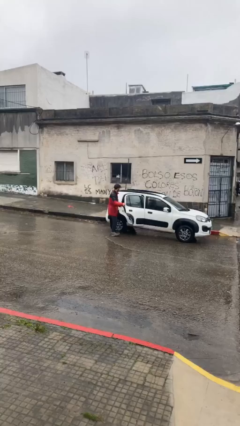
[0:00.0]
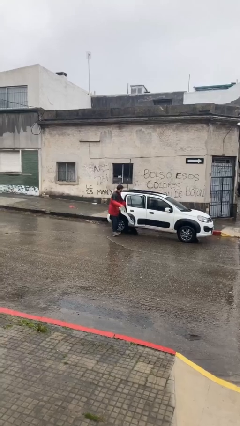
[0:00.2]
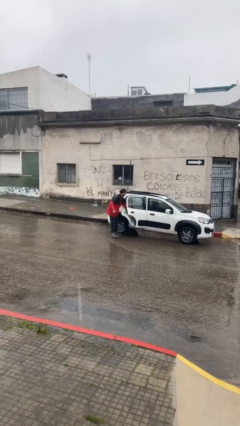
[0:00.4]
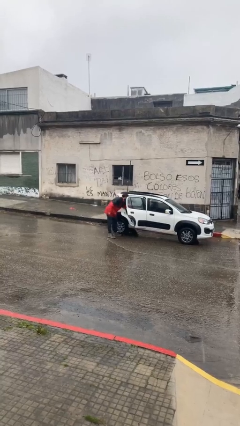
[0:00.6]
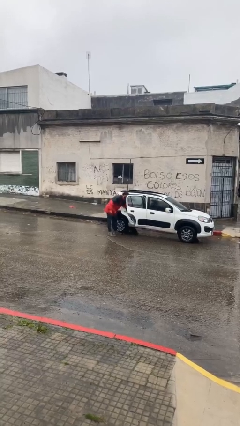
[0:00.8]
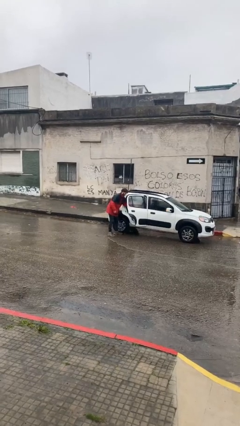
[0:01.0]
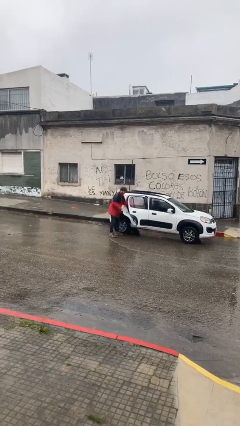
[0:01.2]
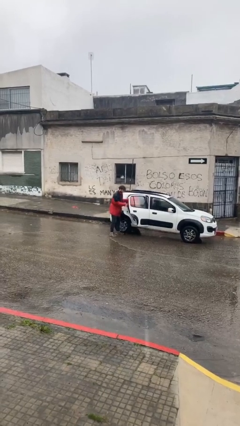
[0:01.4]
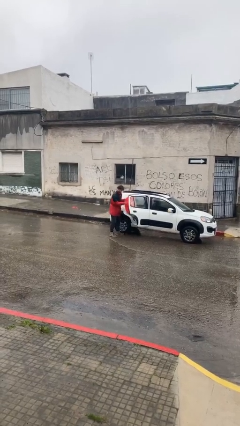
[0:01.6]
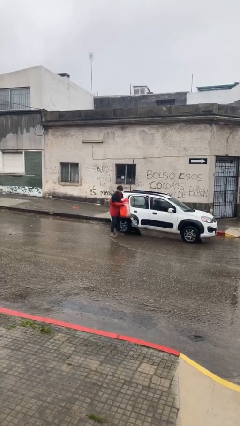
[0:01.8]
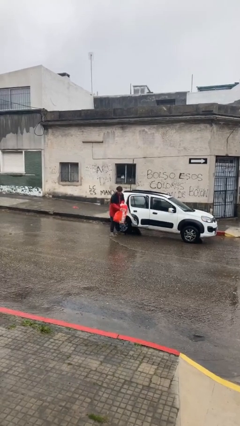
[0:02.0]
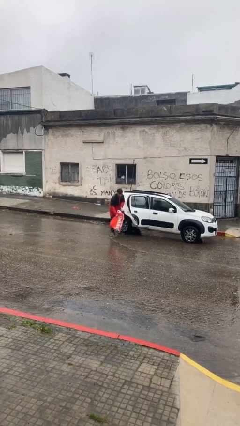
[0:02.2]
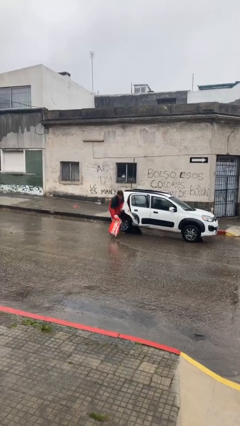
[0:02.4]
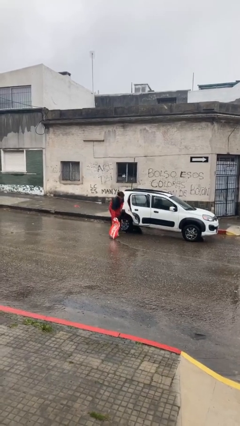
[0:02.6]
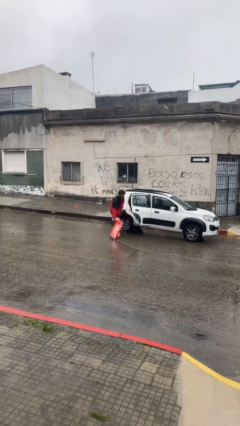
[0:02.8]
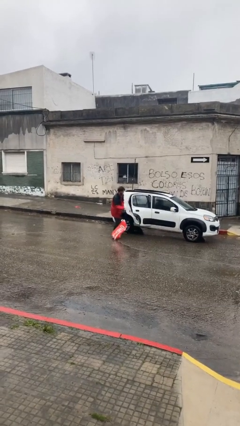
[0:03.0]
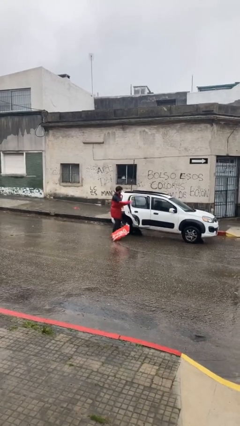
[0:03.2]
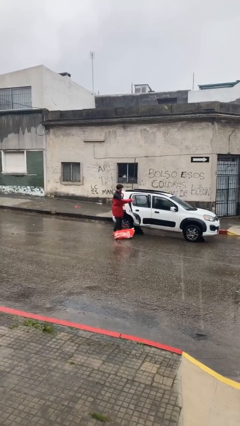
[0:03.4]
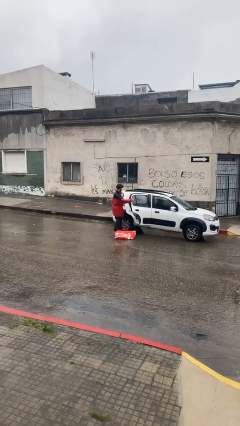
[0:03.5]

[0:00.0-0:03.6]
person unloads car

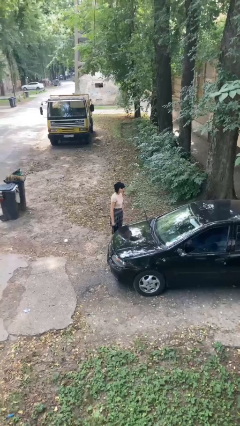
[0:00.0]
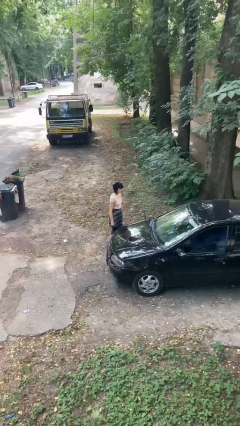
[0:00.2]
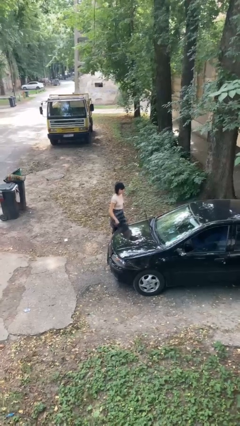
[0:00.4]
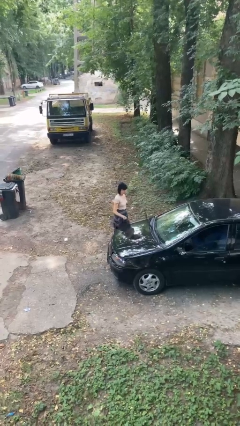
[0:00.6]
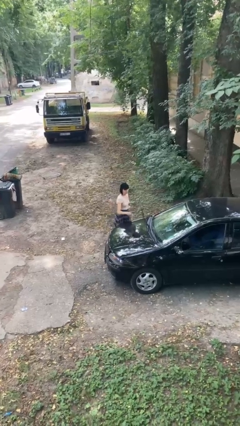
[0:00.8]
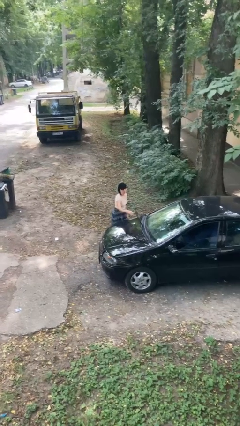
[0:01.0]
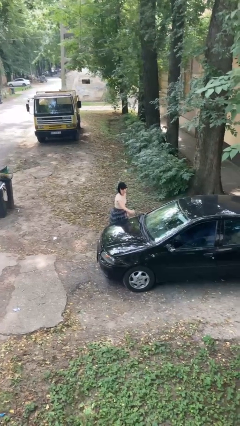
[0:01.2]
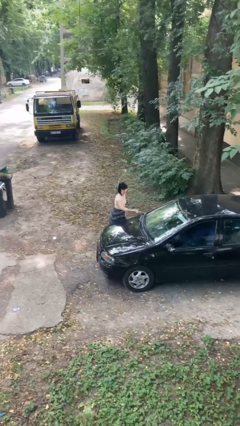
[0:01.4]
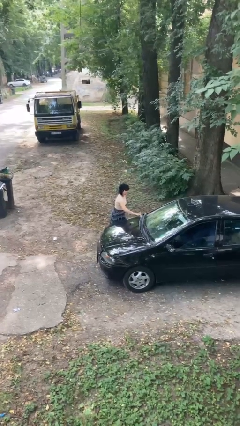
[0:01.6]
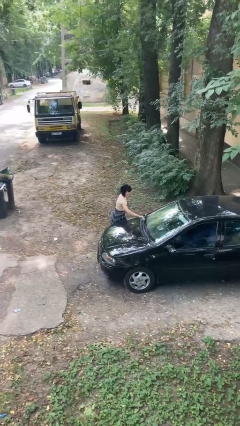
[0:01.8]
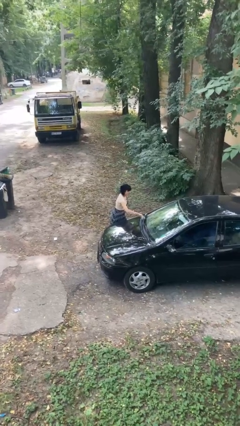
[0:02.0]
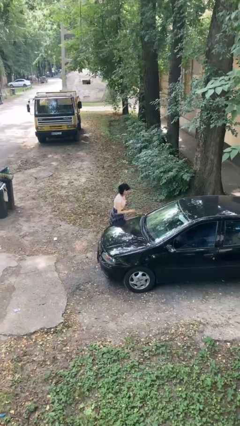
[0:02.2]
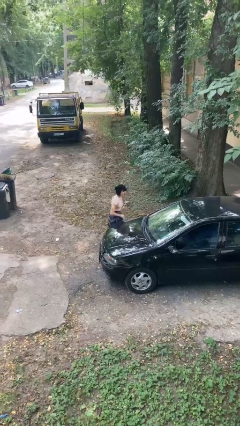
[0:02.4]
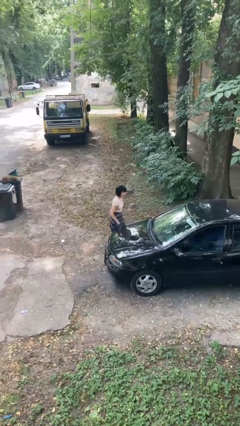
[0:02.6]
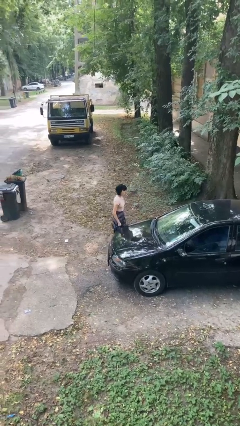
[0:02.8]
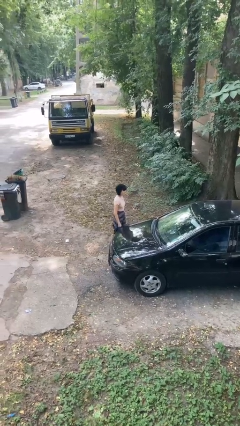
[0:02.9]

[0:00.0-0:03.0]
person flips down car wipers

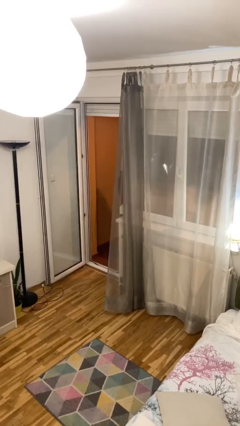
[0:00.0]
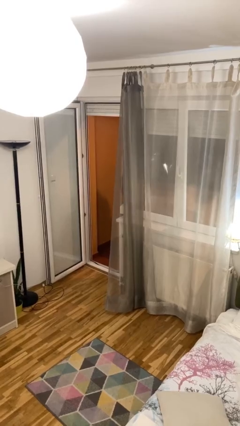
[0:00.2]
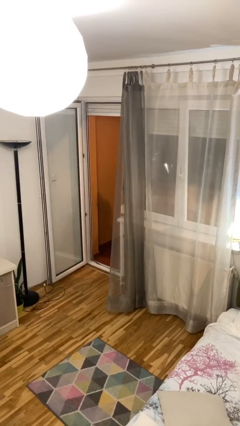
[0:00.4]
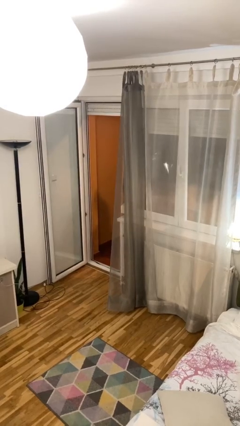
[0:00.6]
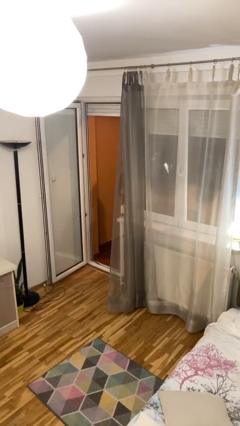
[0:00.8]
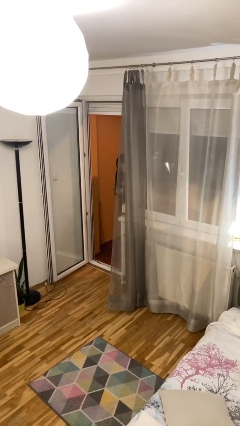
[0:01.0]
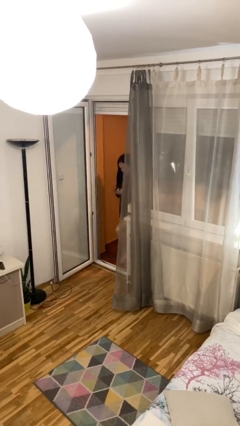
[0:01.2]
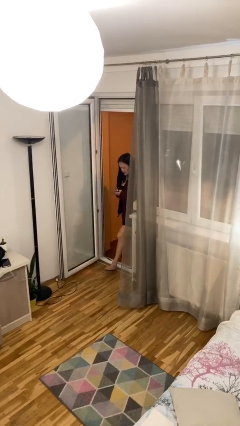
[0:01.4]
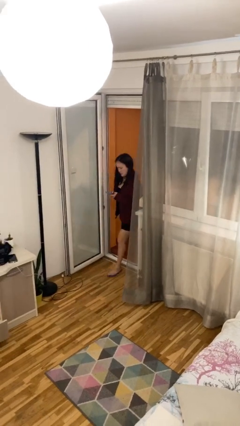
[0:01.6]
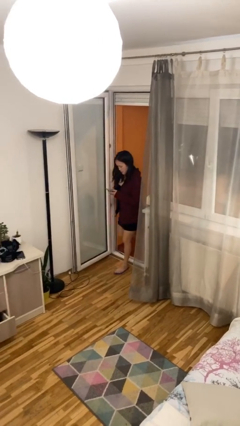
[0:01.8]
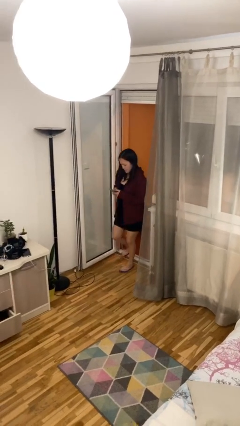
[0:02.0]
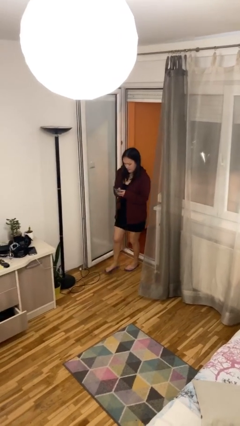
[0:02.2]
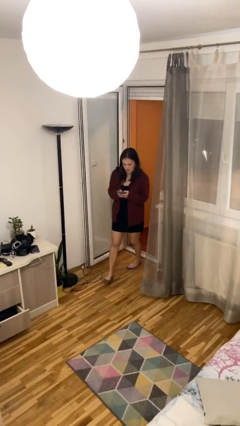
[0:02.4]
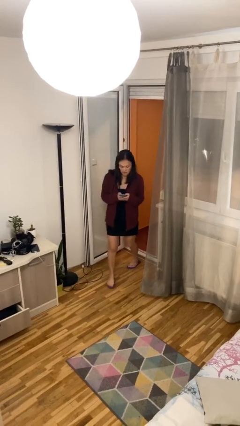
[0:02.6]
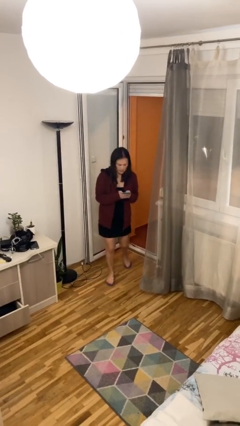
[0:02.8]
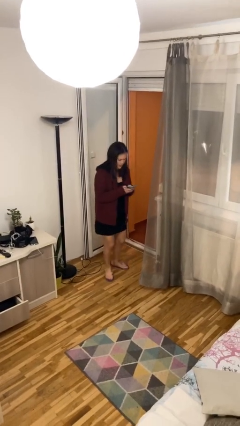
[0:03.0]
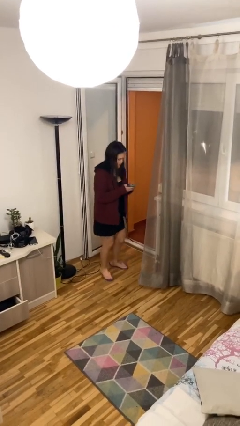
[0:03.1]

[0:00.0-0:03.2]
person enters scene through structure

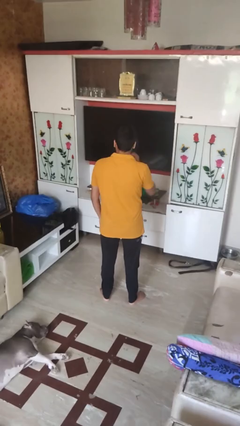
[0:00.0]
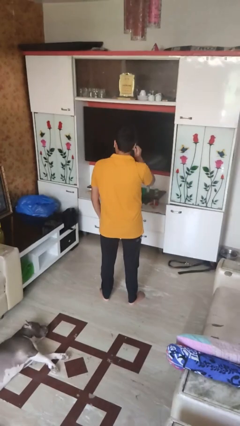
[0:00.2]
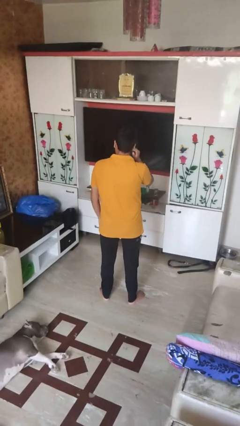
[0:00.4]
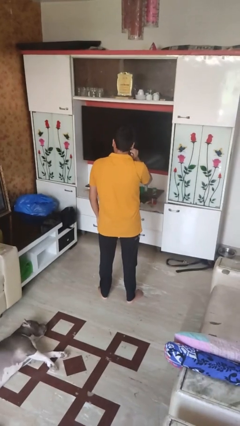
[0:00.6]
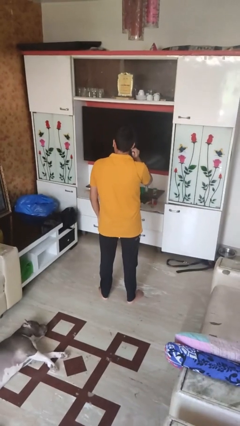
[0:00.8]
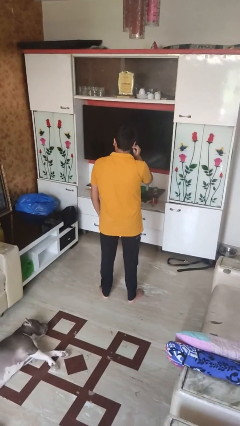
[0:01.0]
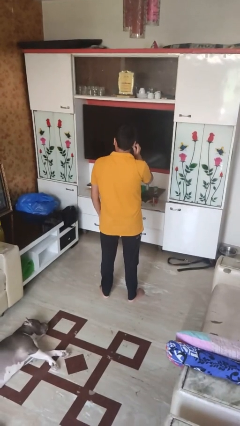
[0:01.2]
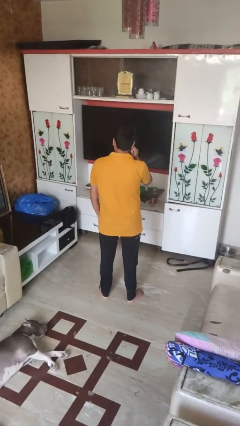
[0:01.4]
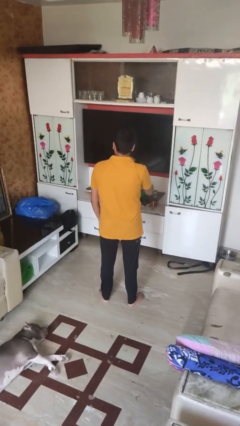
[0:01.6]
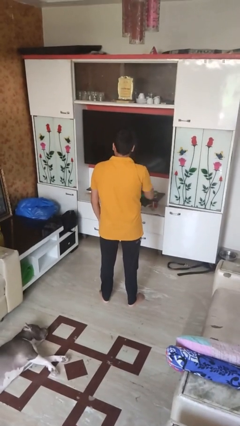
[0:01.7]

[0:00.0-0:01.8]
person touches earlobe

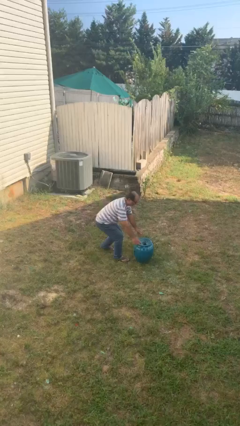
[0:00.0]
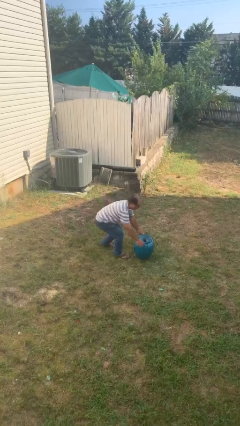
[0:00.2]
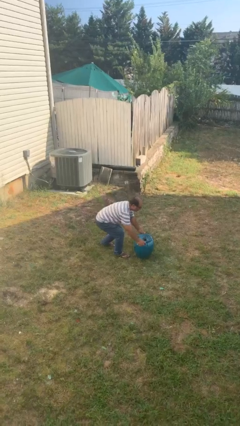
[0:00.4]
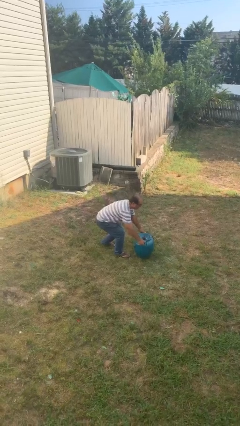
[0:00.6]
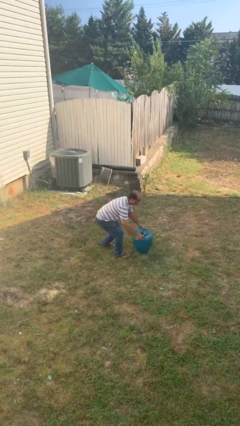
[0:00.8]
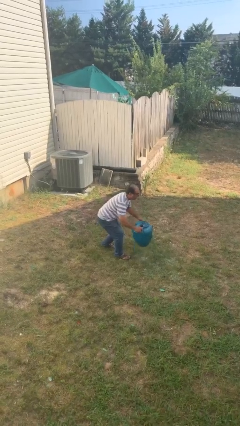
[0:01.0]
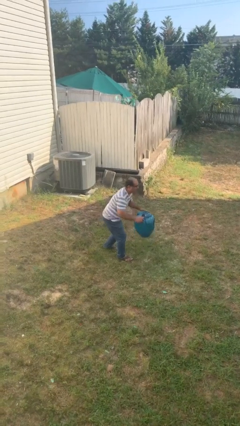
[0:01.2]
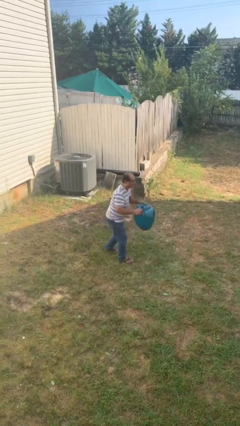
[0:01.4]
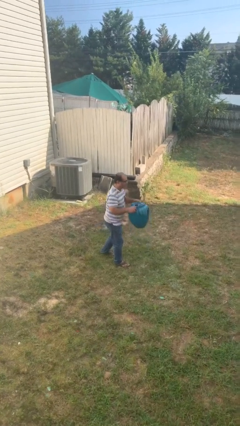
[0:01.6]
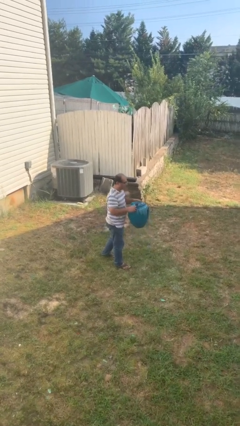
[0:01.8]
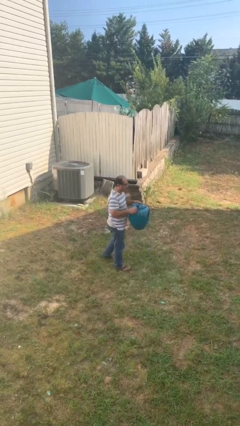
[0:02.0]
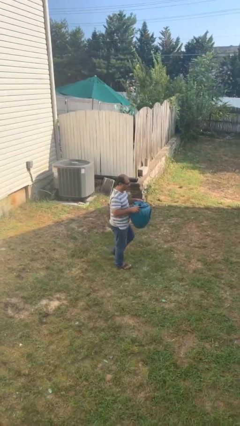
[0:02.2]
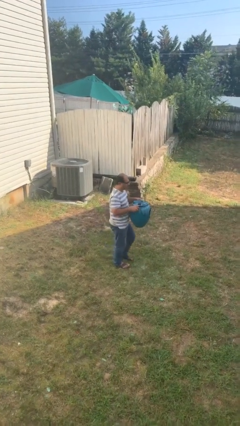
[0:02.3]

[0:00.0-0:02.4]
person picks up object from floor

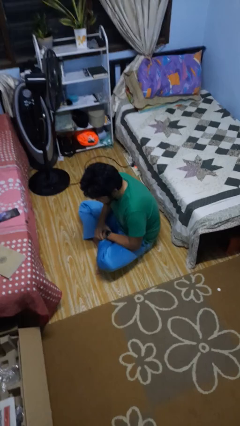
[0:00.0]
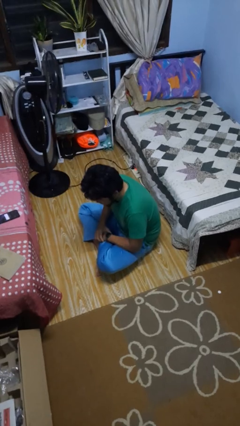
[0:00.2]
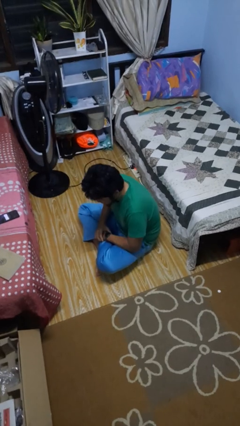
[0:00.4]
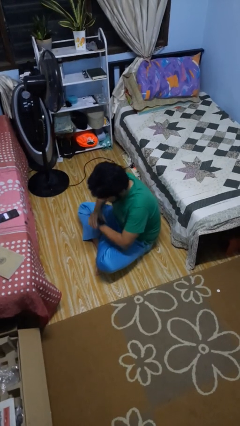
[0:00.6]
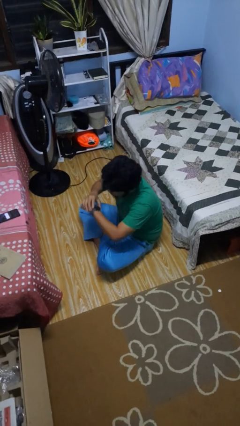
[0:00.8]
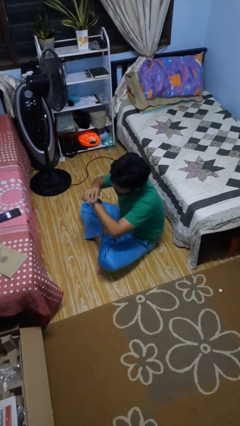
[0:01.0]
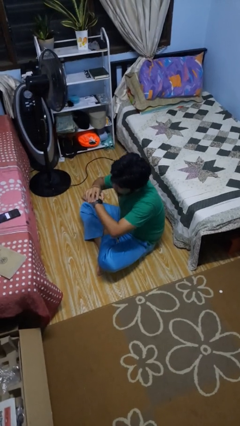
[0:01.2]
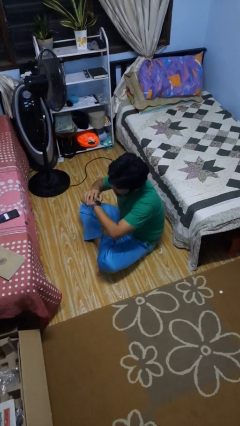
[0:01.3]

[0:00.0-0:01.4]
person looks at wristwatch

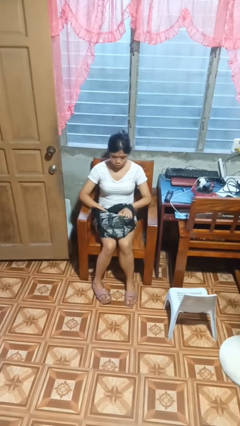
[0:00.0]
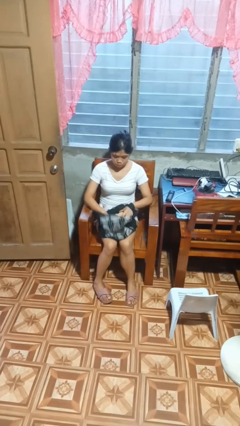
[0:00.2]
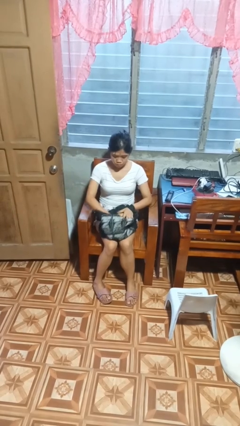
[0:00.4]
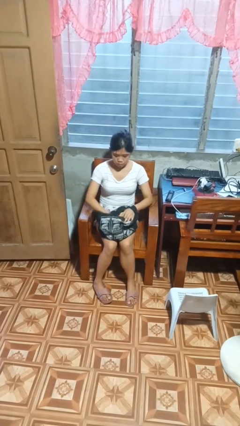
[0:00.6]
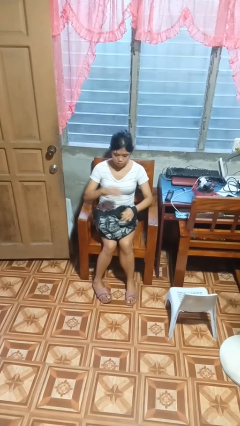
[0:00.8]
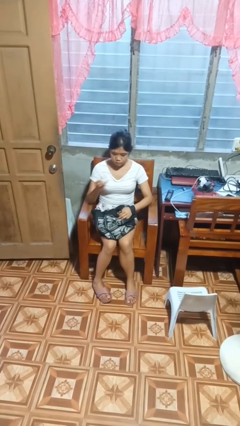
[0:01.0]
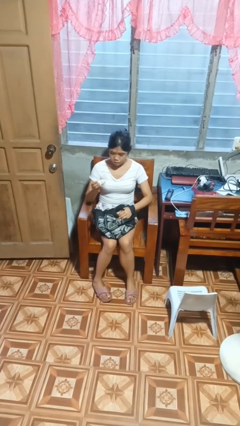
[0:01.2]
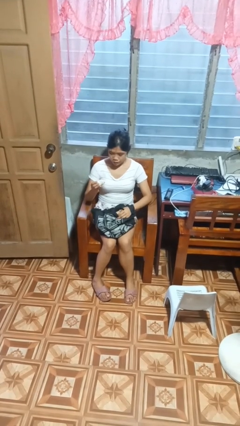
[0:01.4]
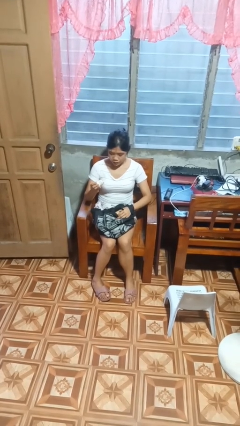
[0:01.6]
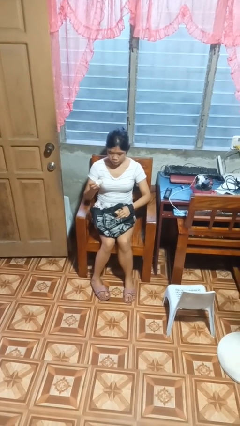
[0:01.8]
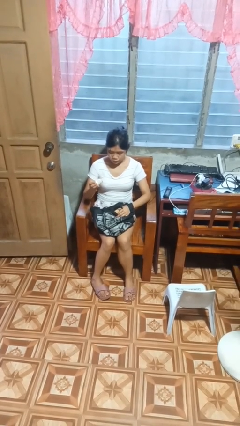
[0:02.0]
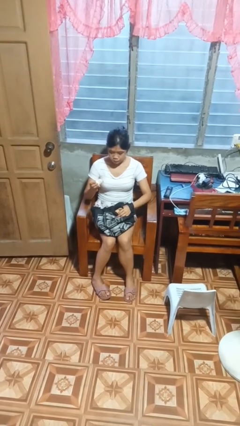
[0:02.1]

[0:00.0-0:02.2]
person searches in bag
